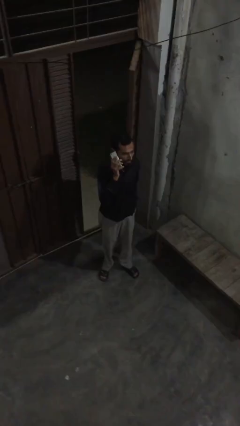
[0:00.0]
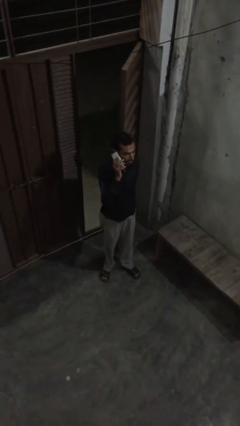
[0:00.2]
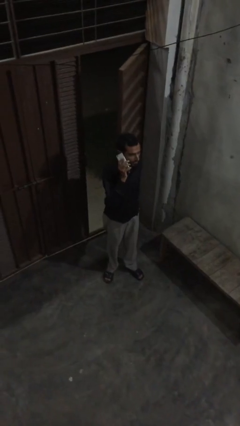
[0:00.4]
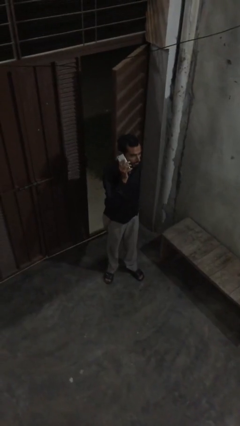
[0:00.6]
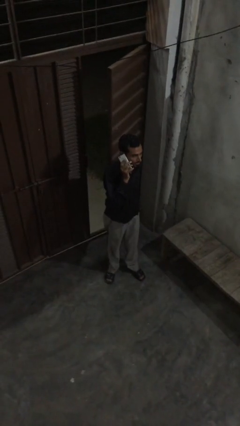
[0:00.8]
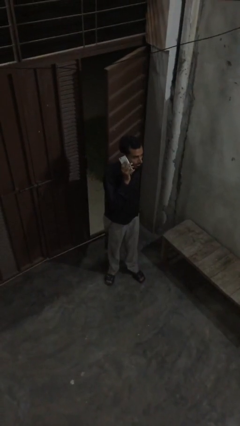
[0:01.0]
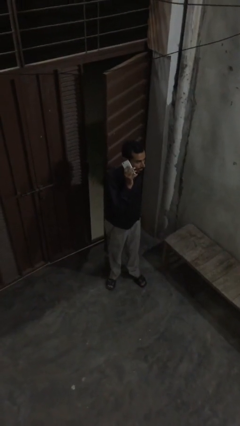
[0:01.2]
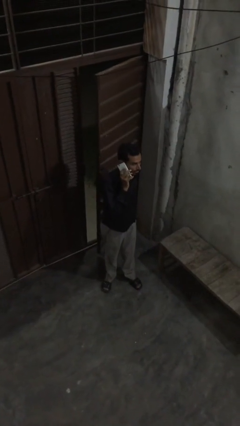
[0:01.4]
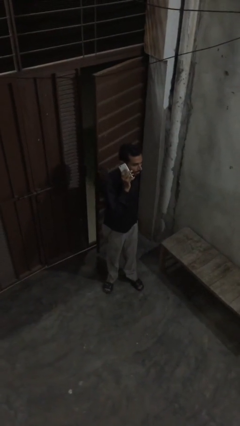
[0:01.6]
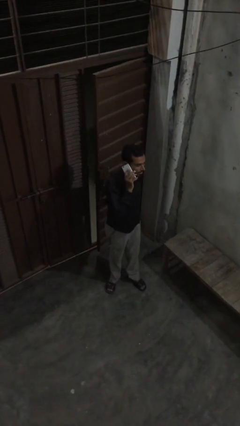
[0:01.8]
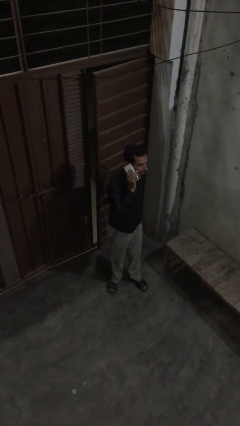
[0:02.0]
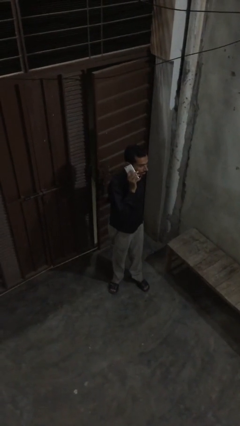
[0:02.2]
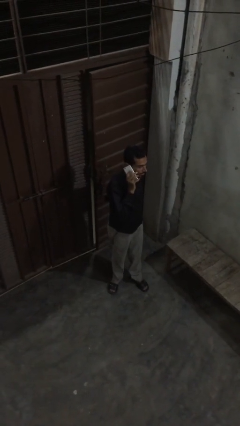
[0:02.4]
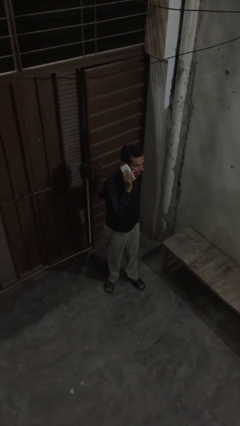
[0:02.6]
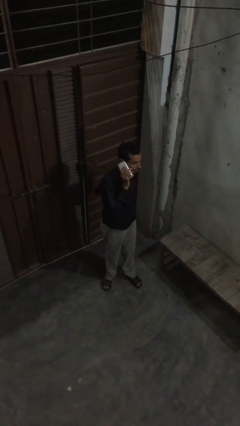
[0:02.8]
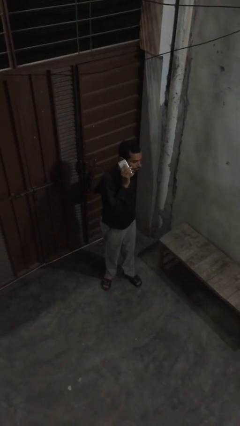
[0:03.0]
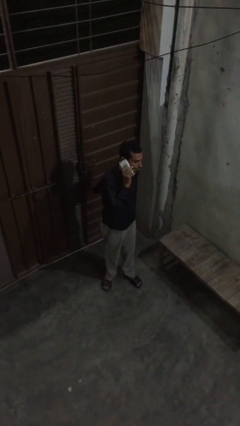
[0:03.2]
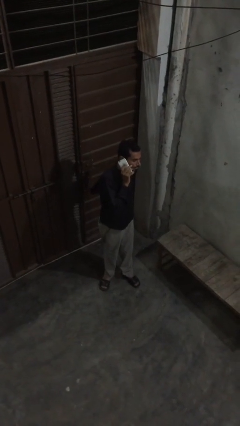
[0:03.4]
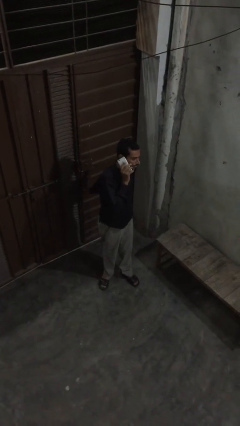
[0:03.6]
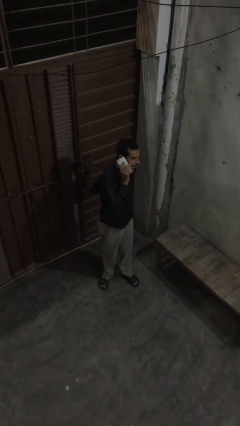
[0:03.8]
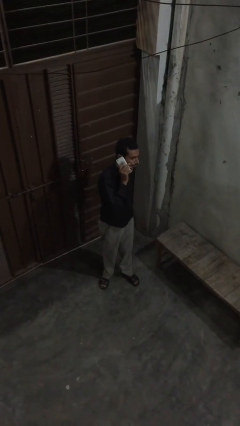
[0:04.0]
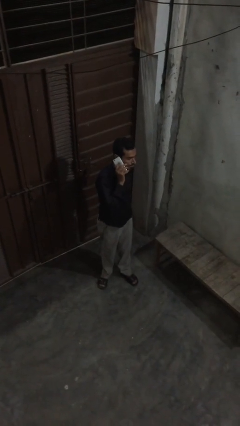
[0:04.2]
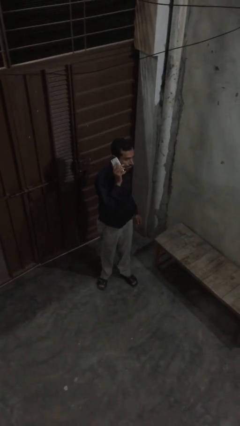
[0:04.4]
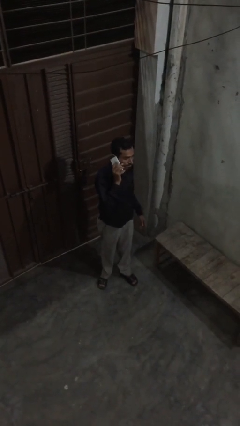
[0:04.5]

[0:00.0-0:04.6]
person closes facility door

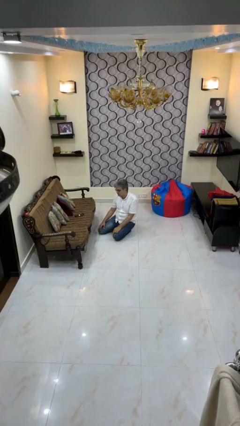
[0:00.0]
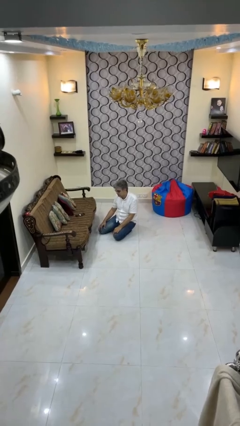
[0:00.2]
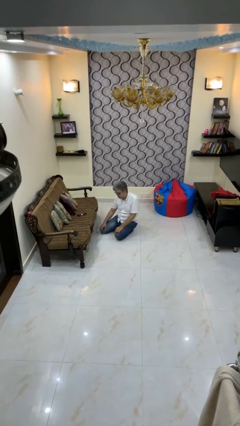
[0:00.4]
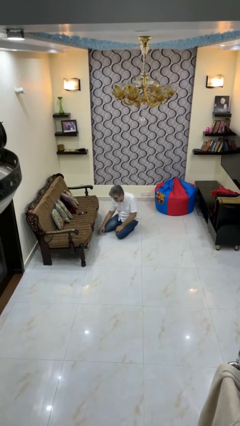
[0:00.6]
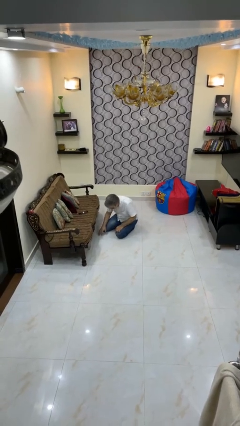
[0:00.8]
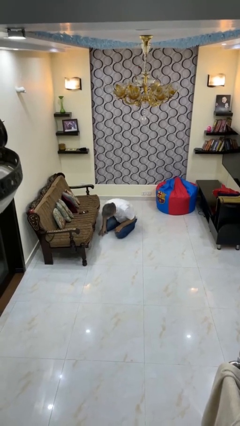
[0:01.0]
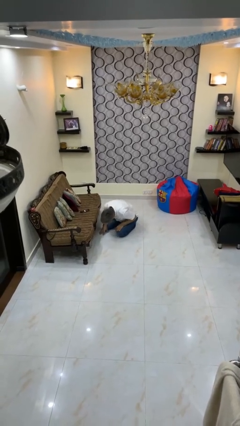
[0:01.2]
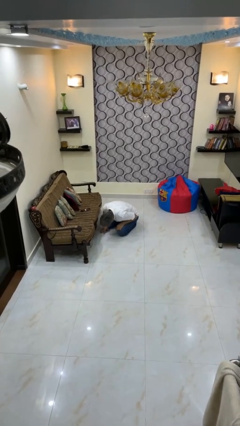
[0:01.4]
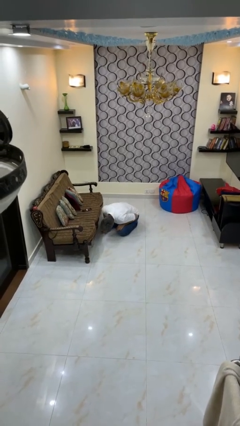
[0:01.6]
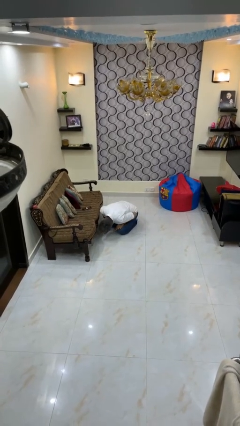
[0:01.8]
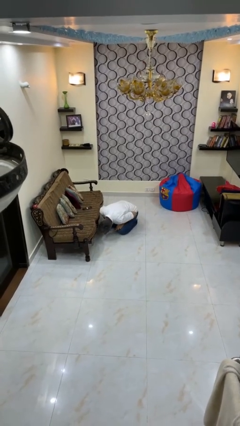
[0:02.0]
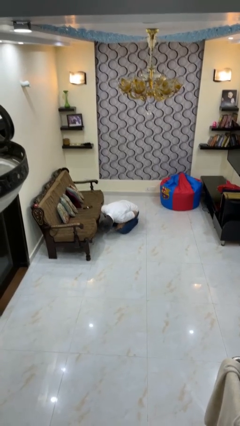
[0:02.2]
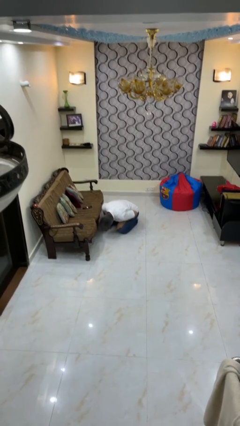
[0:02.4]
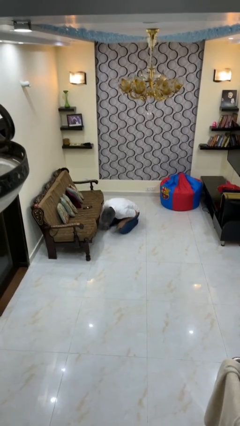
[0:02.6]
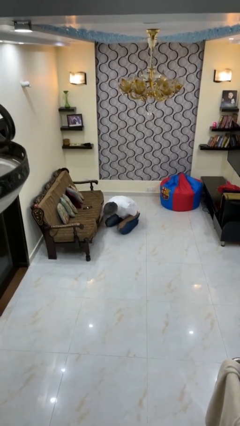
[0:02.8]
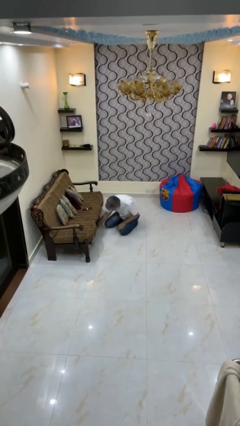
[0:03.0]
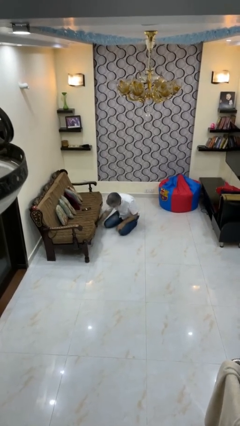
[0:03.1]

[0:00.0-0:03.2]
person searches under couch

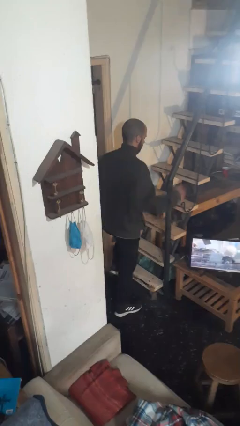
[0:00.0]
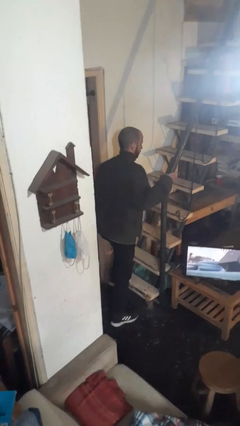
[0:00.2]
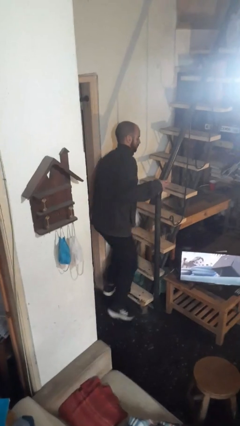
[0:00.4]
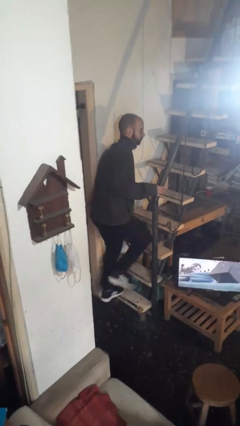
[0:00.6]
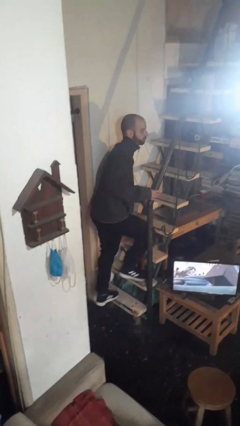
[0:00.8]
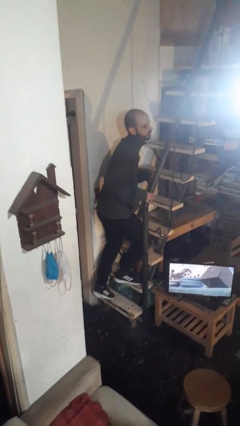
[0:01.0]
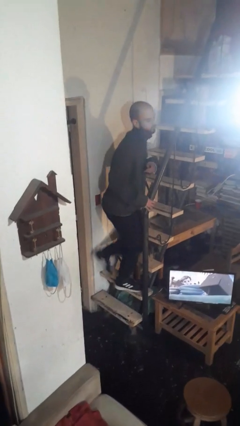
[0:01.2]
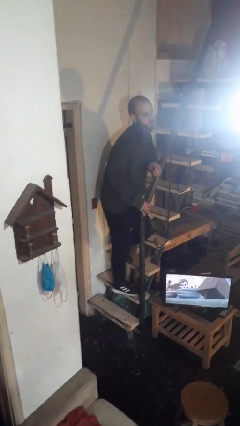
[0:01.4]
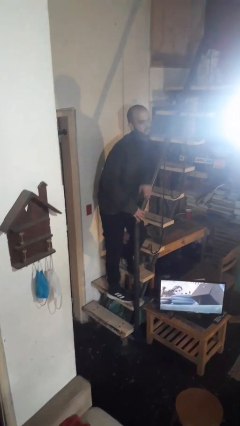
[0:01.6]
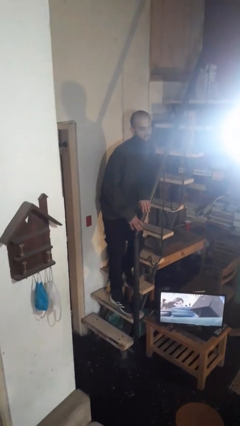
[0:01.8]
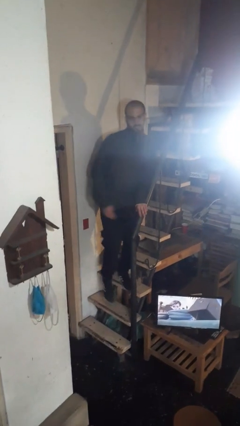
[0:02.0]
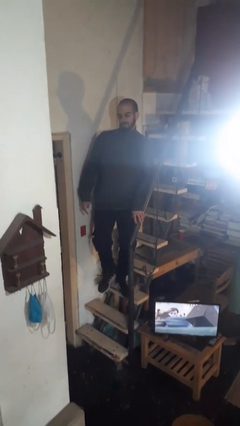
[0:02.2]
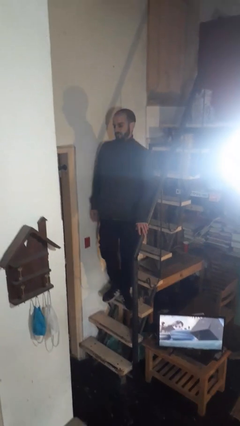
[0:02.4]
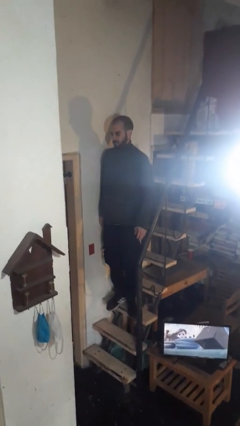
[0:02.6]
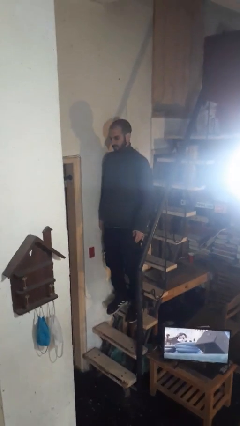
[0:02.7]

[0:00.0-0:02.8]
person climbs up stairs

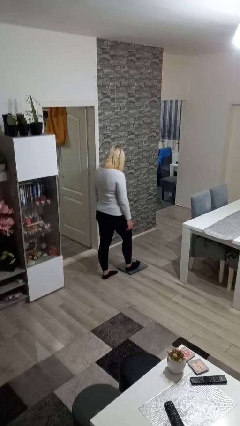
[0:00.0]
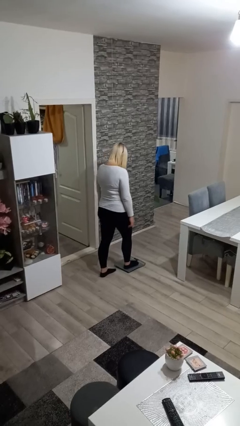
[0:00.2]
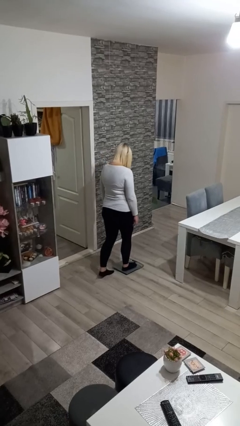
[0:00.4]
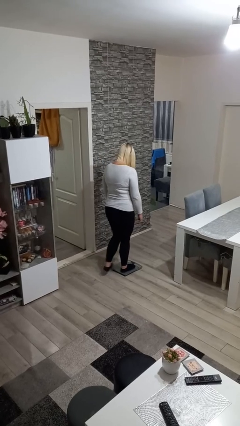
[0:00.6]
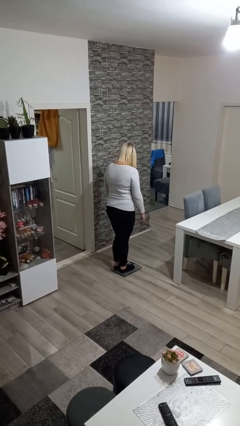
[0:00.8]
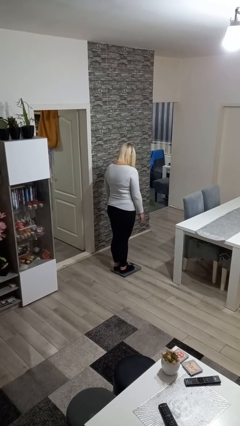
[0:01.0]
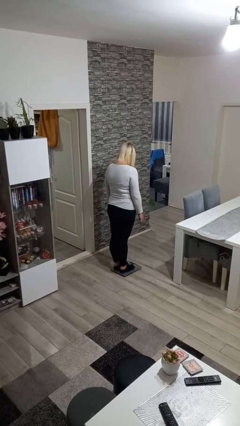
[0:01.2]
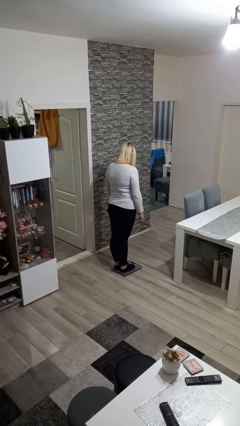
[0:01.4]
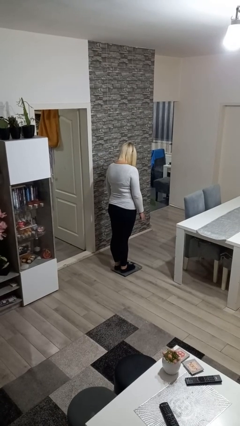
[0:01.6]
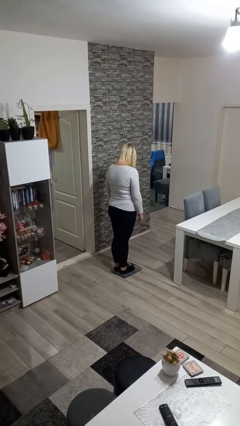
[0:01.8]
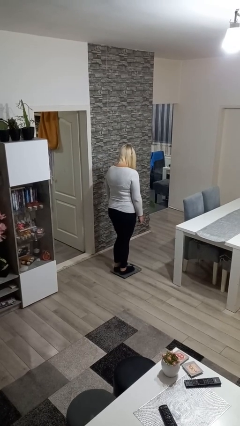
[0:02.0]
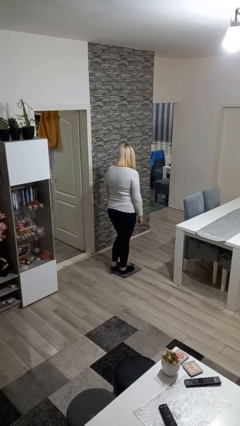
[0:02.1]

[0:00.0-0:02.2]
person uses bodyweight scale

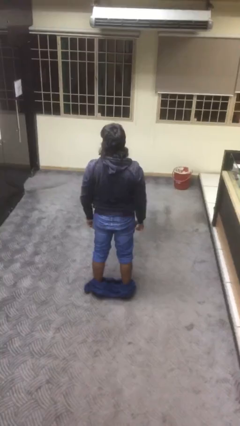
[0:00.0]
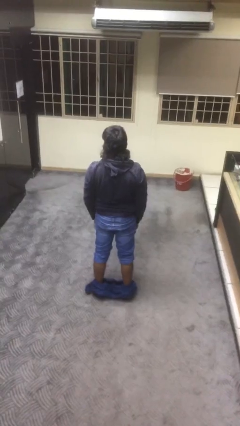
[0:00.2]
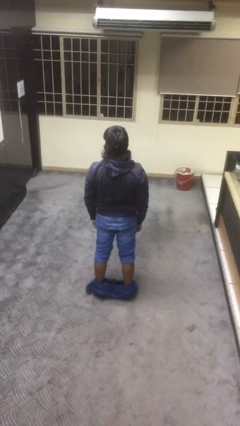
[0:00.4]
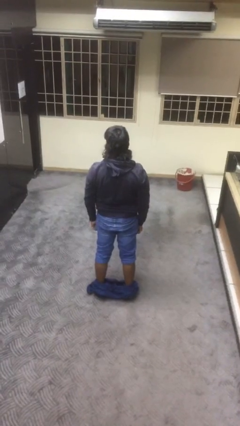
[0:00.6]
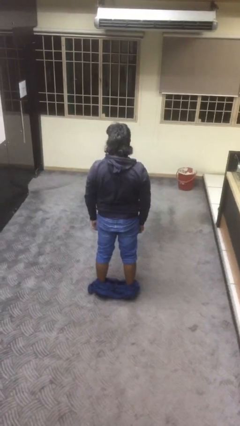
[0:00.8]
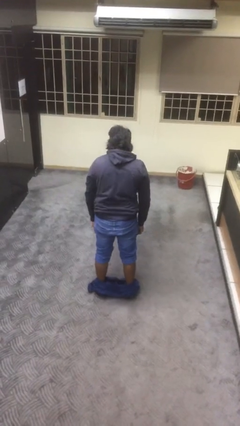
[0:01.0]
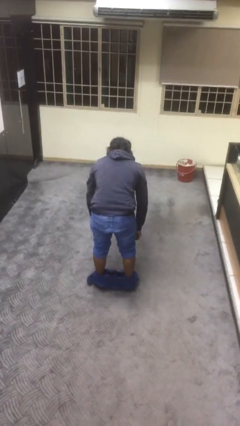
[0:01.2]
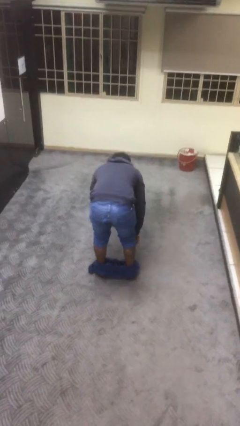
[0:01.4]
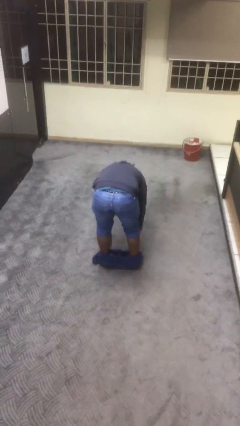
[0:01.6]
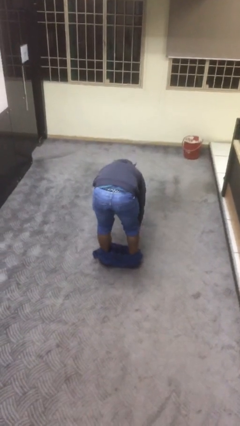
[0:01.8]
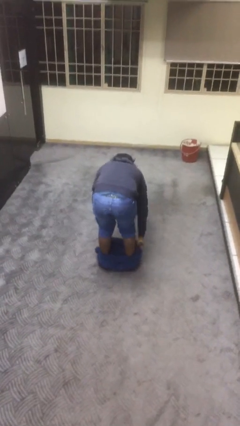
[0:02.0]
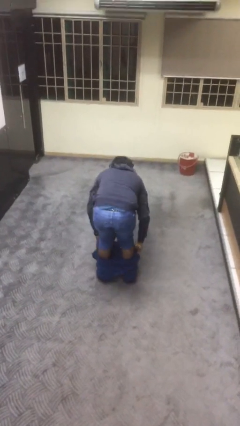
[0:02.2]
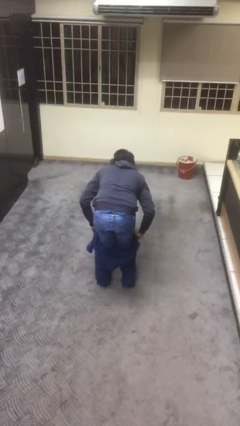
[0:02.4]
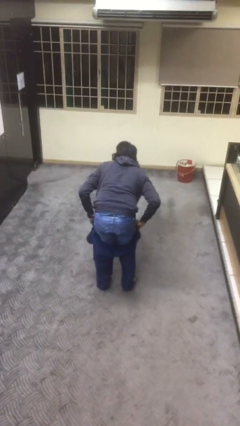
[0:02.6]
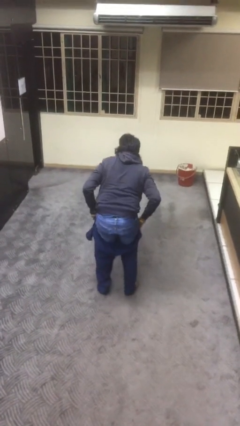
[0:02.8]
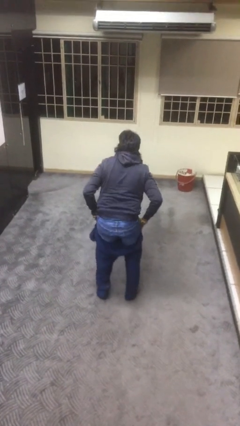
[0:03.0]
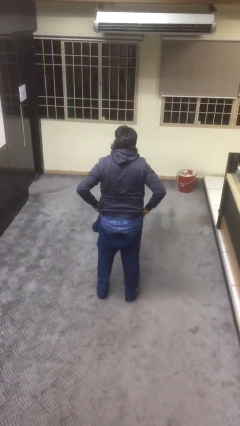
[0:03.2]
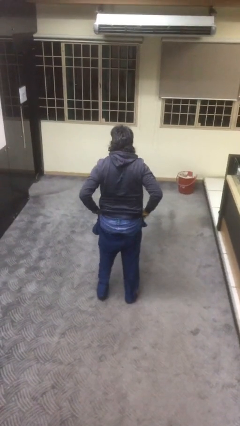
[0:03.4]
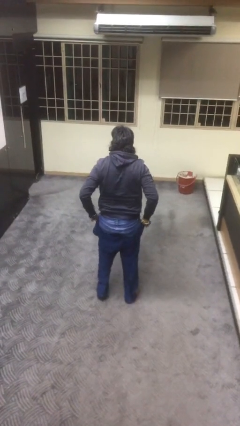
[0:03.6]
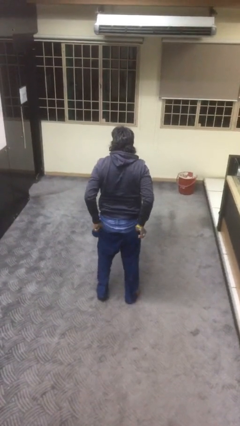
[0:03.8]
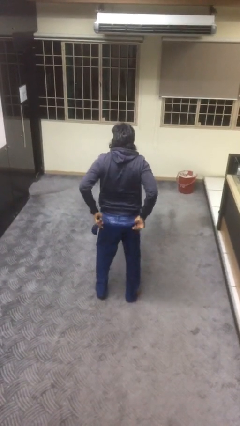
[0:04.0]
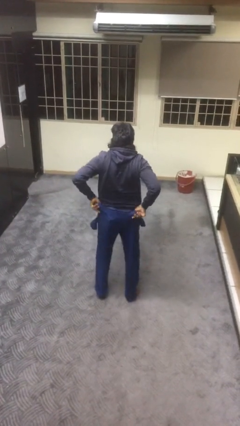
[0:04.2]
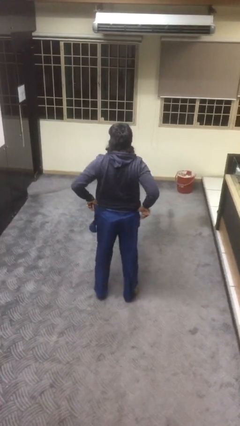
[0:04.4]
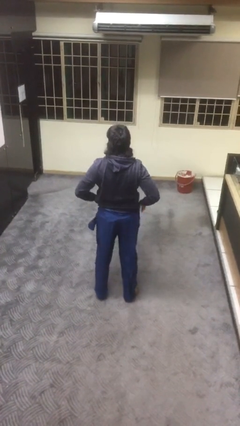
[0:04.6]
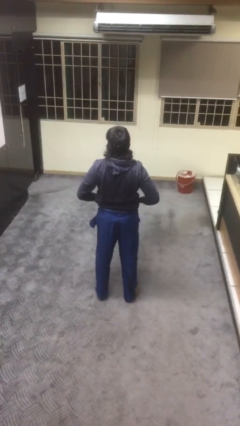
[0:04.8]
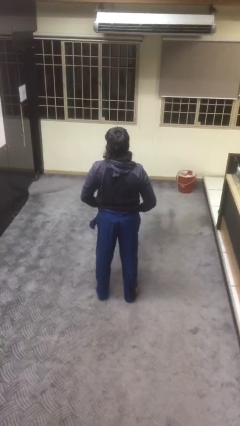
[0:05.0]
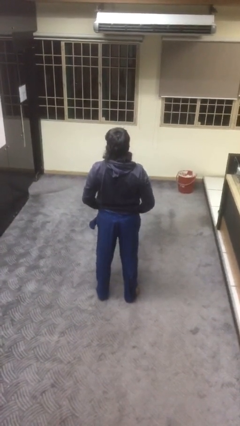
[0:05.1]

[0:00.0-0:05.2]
person puts on pants
